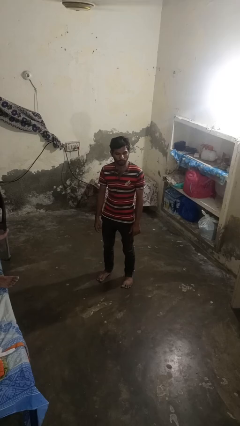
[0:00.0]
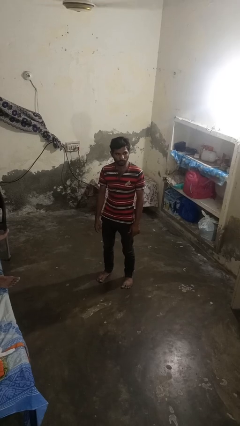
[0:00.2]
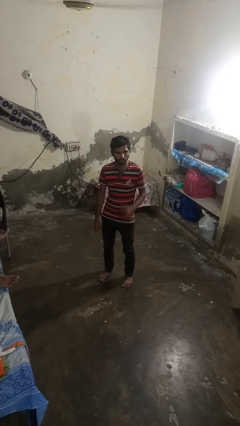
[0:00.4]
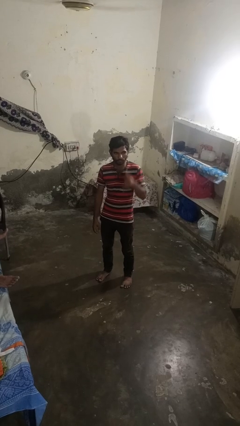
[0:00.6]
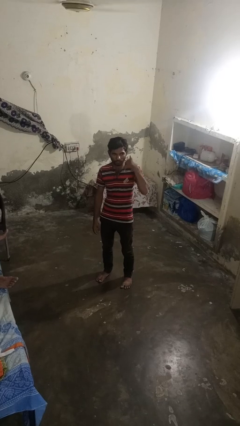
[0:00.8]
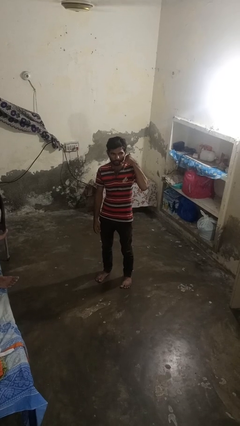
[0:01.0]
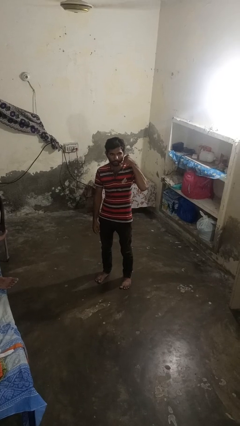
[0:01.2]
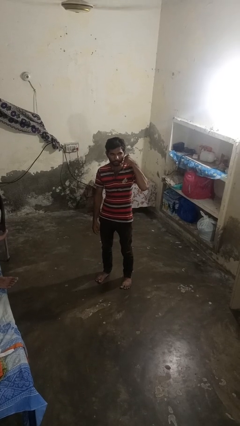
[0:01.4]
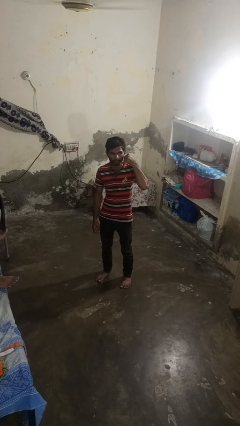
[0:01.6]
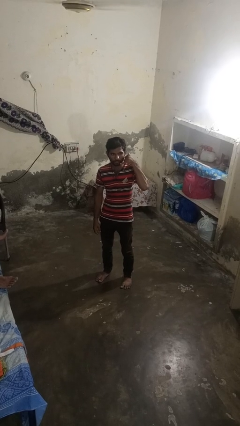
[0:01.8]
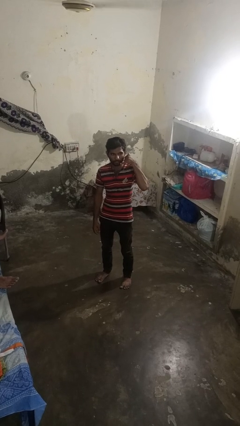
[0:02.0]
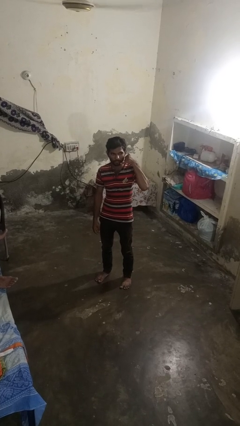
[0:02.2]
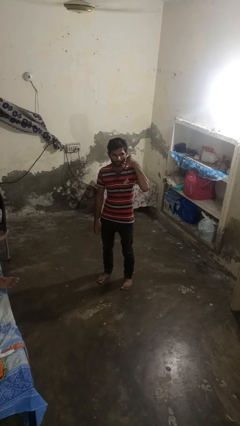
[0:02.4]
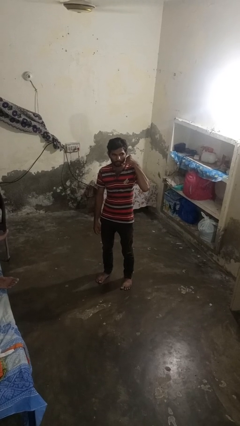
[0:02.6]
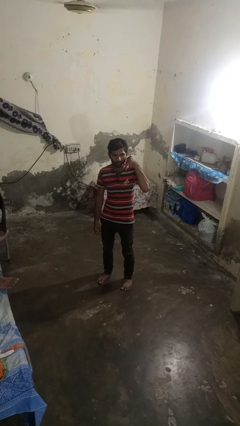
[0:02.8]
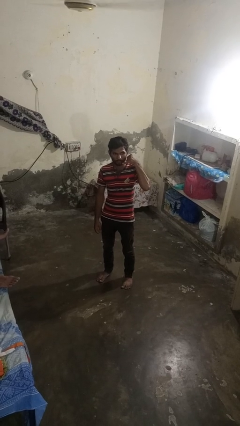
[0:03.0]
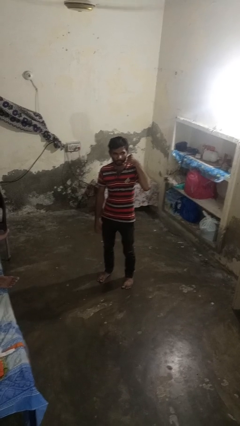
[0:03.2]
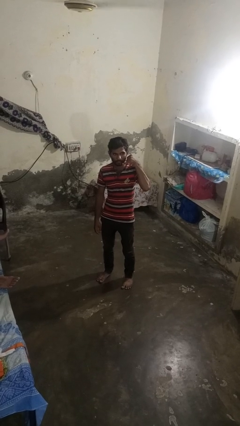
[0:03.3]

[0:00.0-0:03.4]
person gestures call me

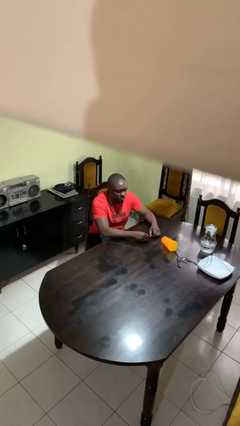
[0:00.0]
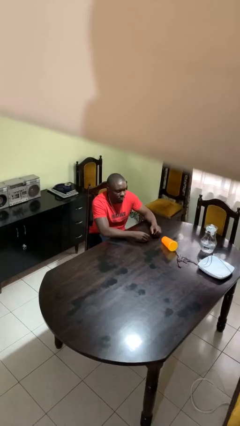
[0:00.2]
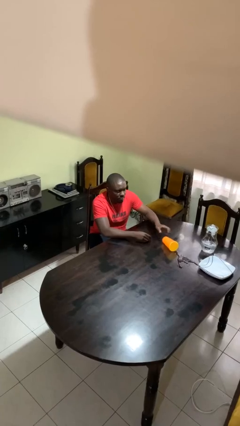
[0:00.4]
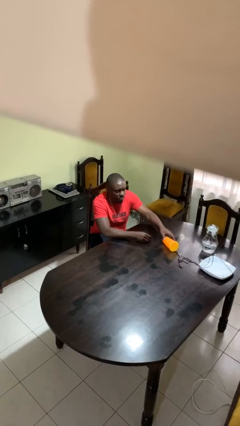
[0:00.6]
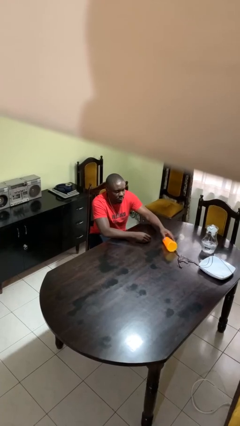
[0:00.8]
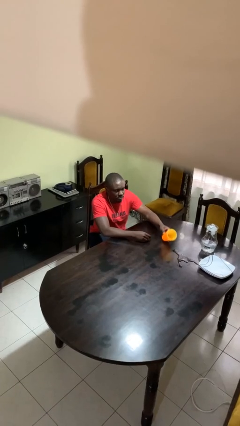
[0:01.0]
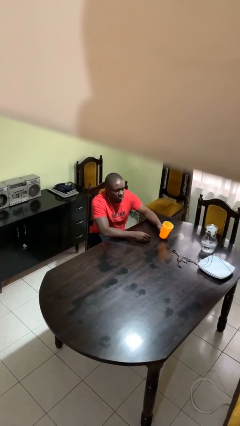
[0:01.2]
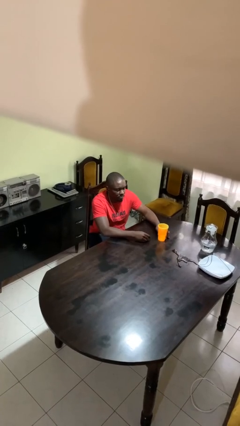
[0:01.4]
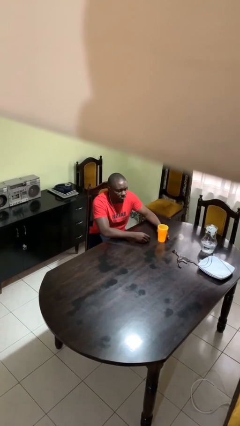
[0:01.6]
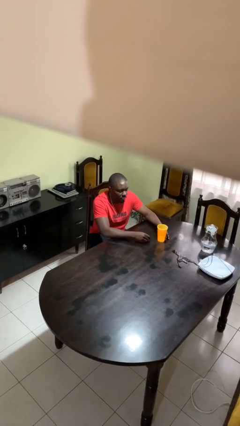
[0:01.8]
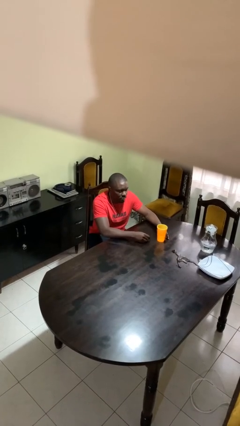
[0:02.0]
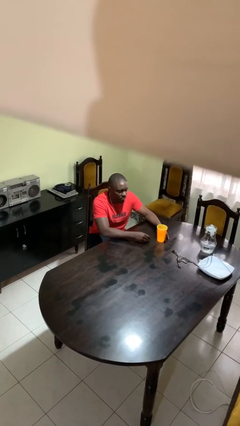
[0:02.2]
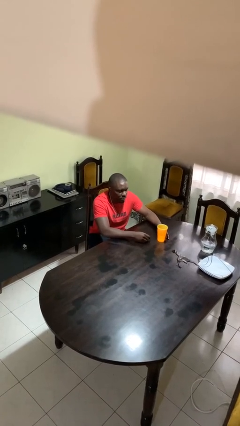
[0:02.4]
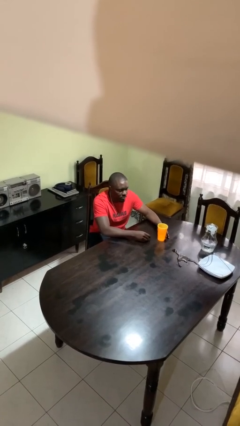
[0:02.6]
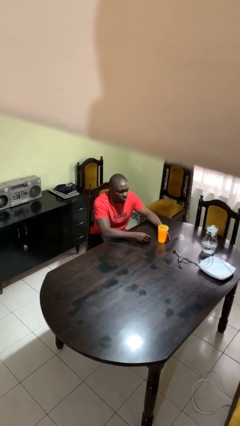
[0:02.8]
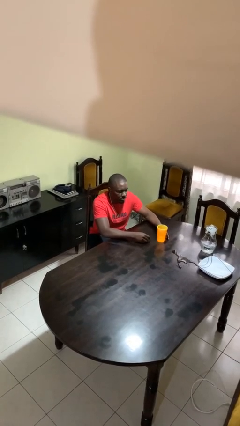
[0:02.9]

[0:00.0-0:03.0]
person sets upright glass

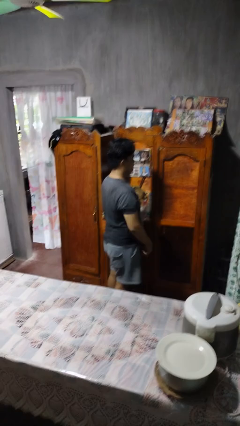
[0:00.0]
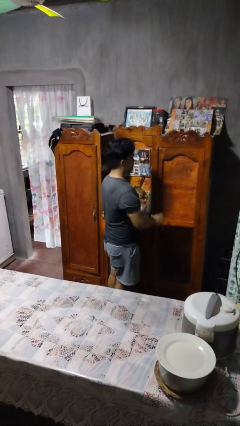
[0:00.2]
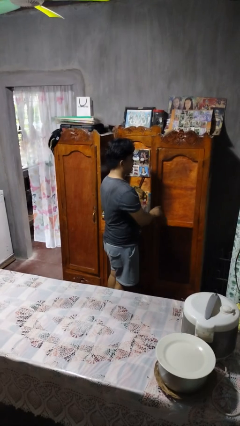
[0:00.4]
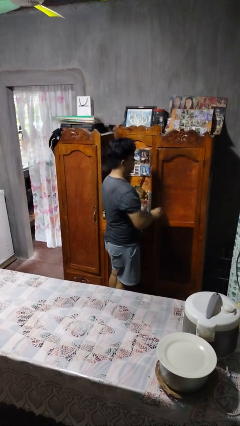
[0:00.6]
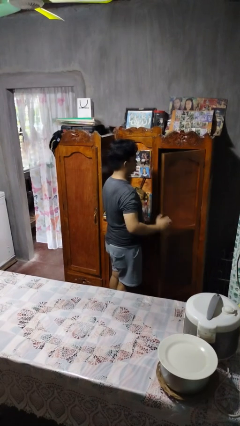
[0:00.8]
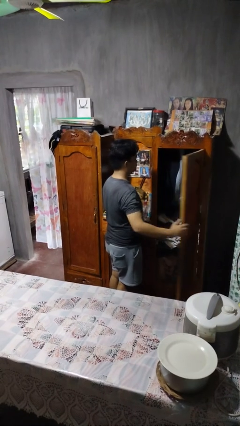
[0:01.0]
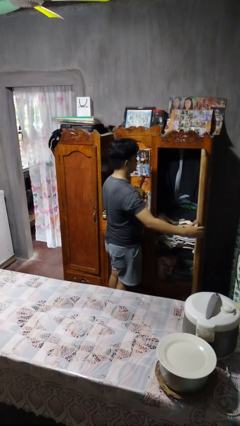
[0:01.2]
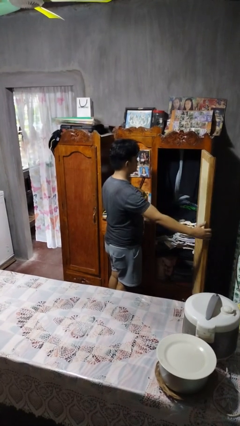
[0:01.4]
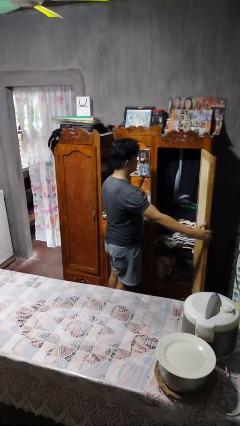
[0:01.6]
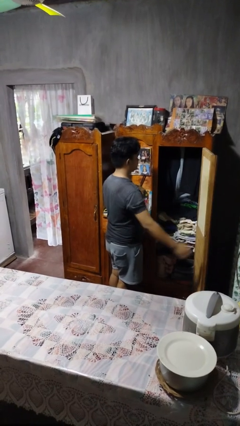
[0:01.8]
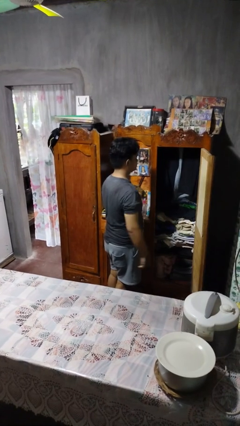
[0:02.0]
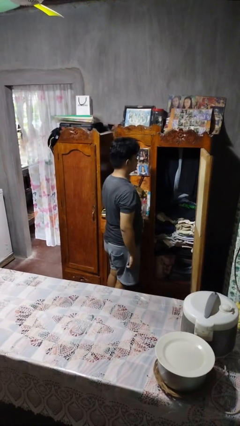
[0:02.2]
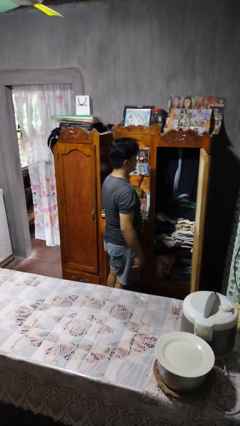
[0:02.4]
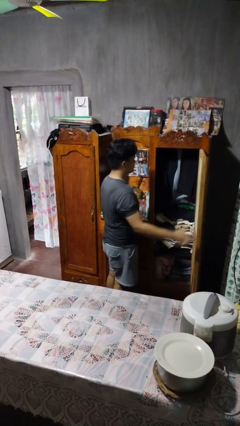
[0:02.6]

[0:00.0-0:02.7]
person opens closet door

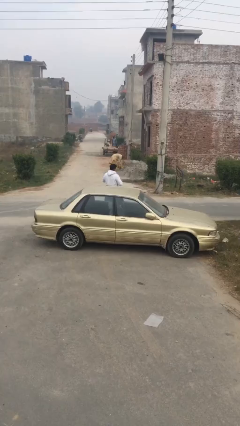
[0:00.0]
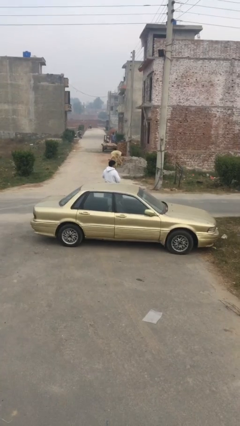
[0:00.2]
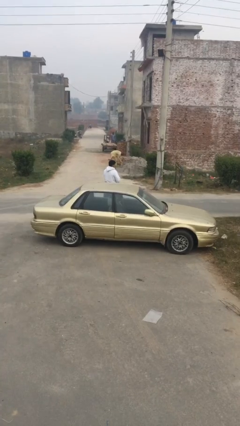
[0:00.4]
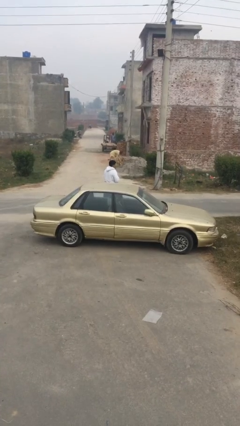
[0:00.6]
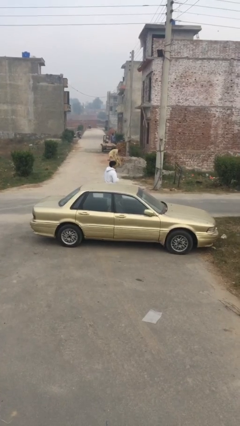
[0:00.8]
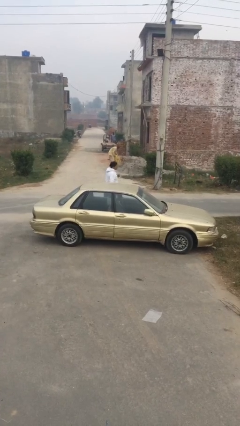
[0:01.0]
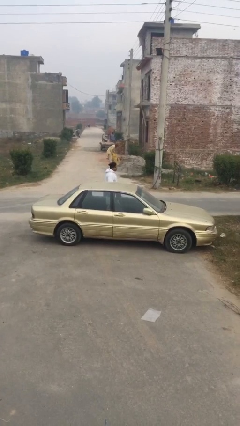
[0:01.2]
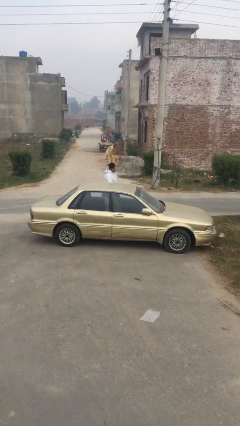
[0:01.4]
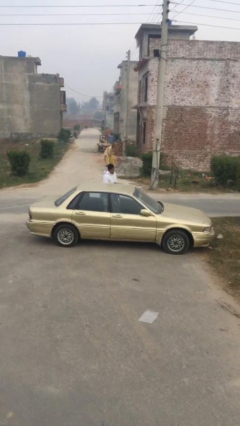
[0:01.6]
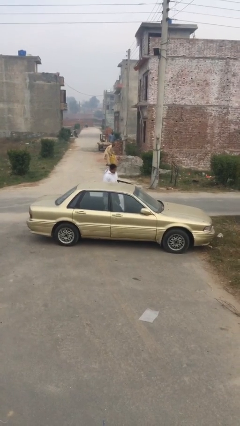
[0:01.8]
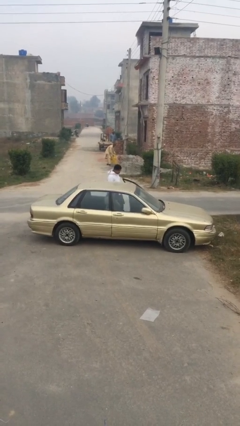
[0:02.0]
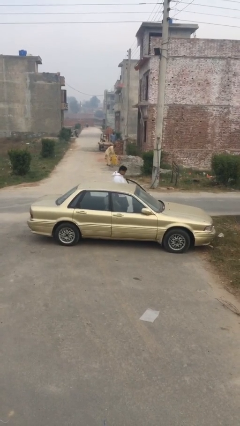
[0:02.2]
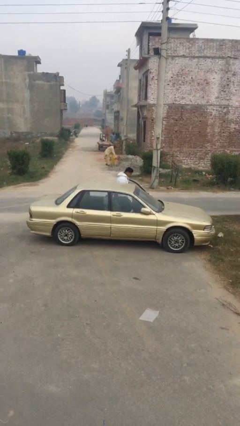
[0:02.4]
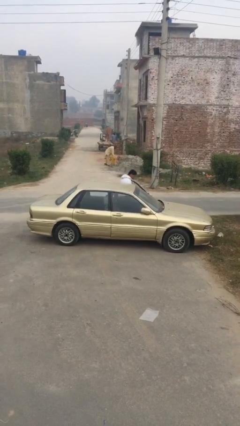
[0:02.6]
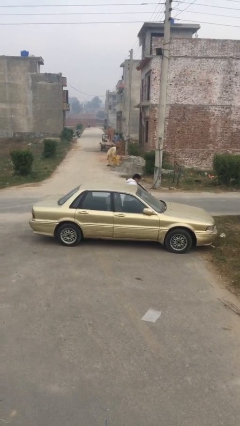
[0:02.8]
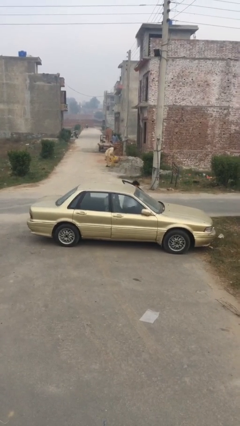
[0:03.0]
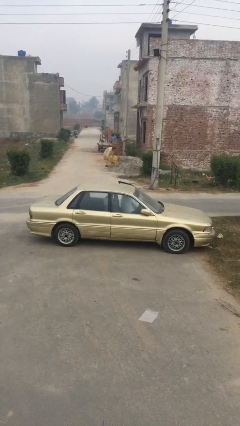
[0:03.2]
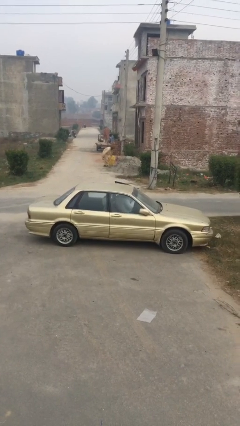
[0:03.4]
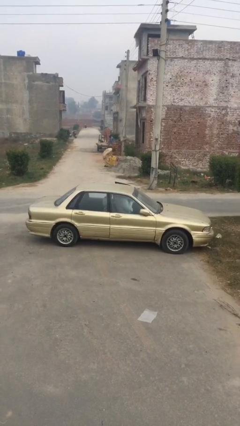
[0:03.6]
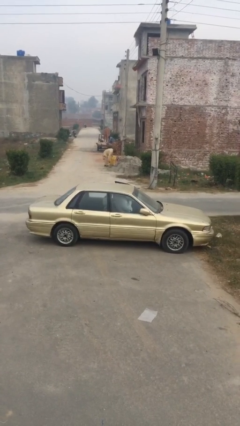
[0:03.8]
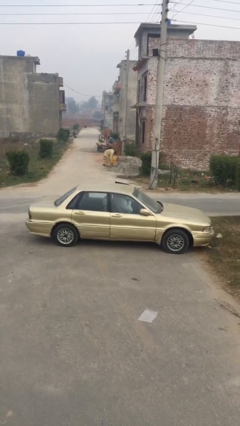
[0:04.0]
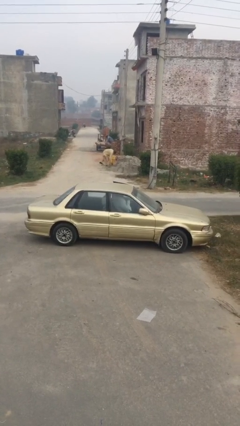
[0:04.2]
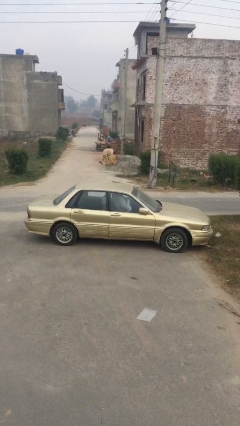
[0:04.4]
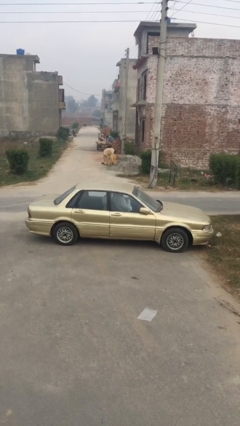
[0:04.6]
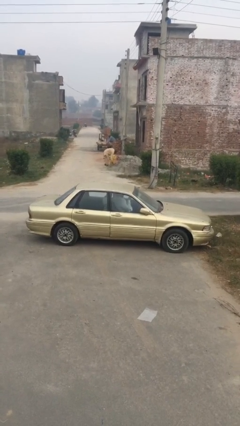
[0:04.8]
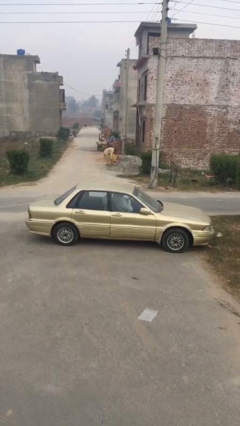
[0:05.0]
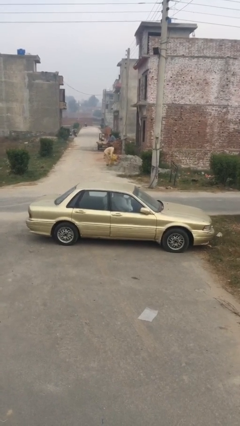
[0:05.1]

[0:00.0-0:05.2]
car picks up person

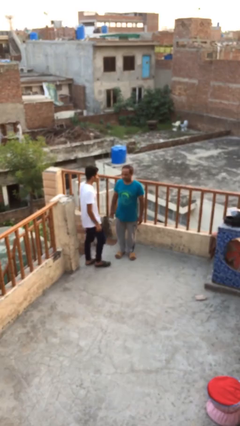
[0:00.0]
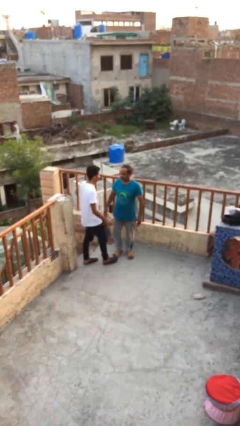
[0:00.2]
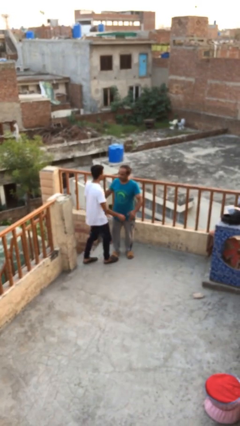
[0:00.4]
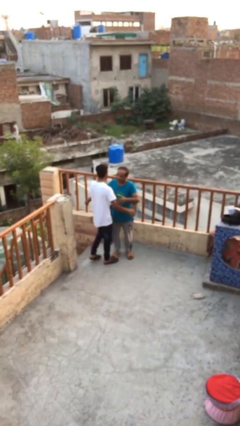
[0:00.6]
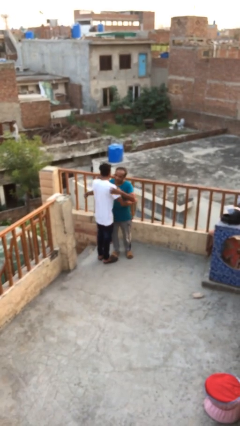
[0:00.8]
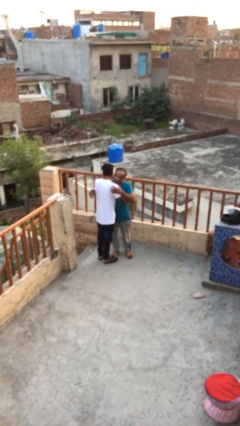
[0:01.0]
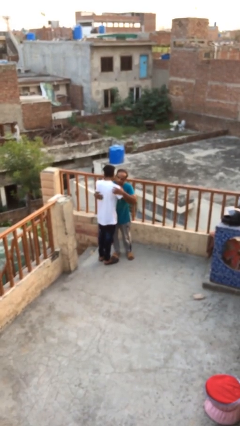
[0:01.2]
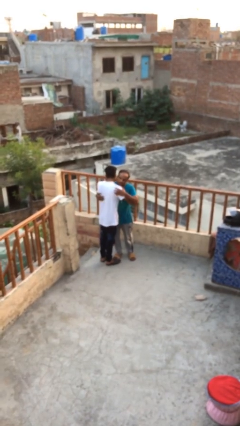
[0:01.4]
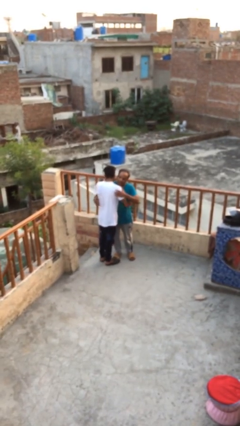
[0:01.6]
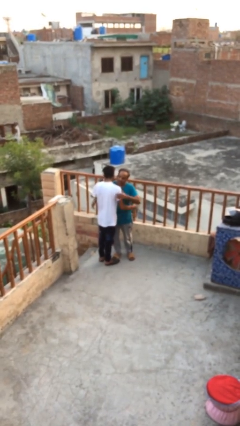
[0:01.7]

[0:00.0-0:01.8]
person embraces person

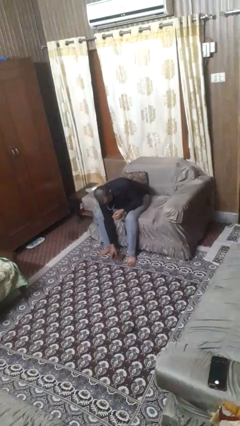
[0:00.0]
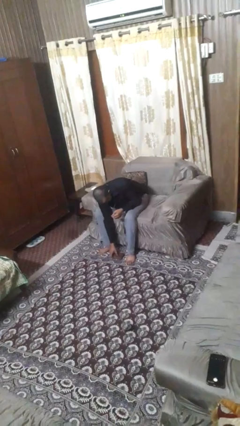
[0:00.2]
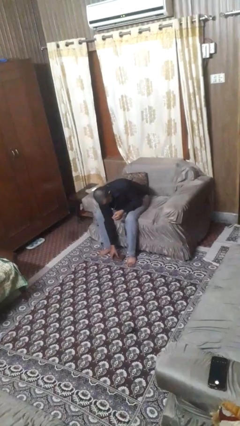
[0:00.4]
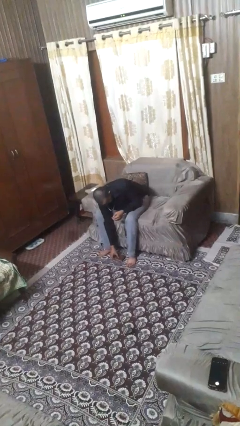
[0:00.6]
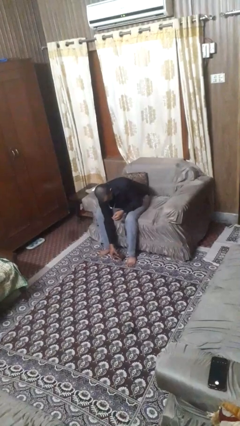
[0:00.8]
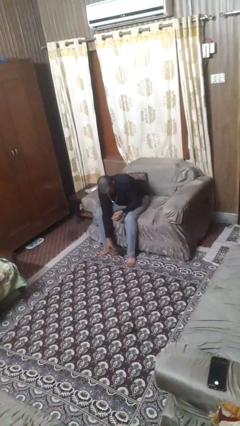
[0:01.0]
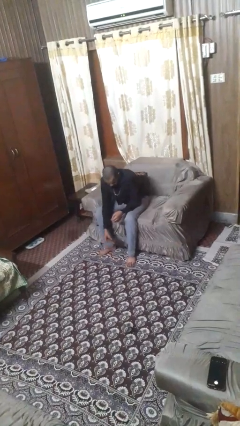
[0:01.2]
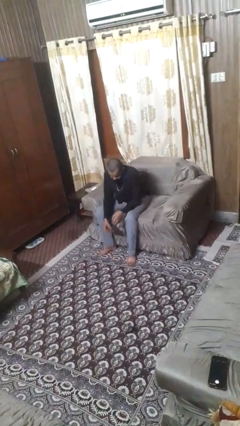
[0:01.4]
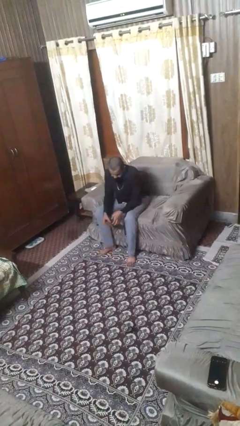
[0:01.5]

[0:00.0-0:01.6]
person picks up object from floor
